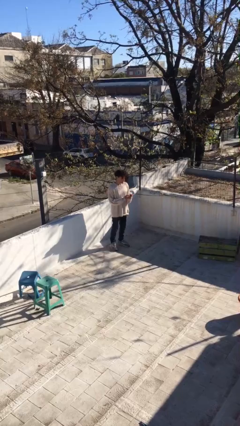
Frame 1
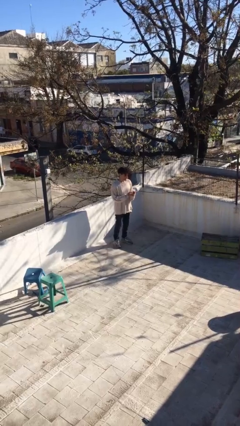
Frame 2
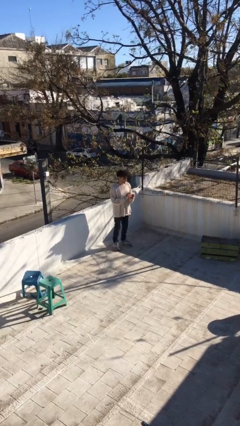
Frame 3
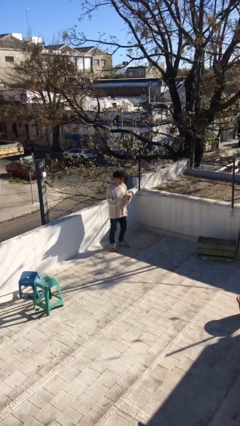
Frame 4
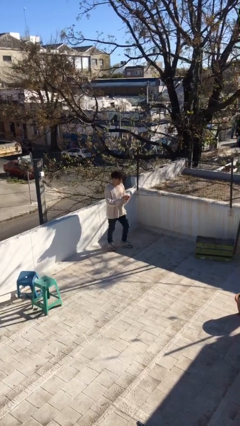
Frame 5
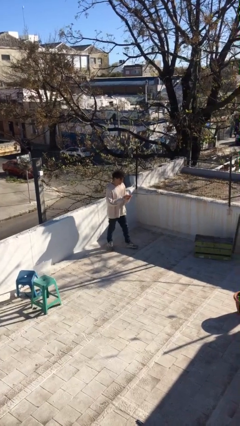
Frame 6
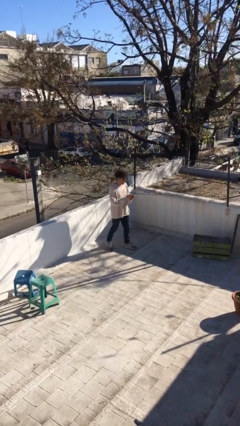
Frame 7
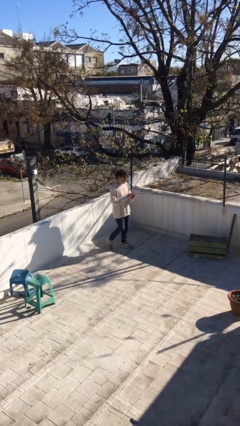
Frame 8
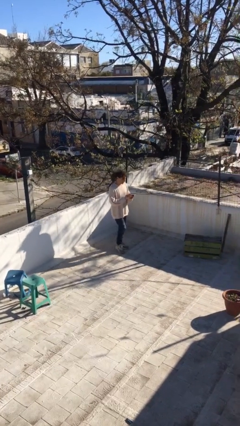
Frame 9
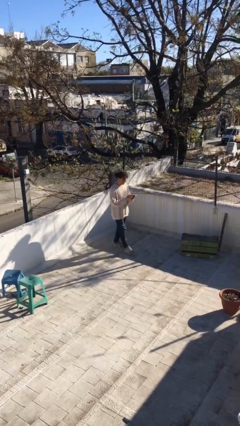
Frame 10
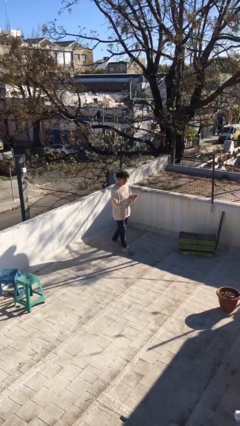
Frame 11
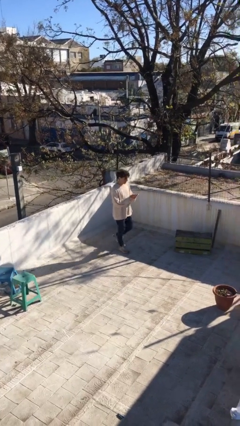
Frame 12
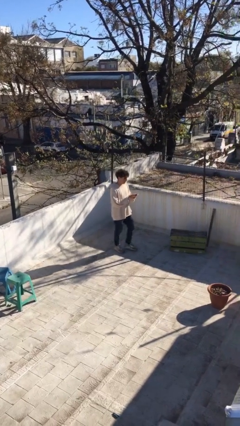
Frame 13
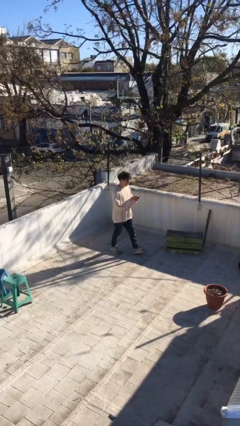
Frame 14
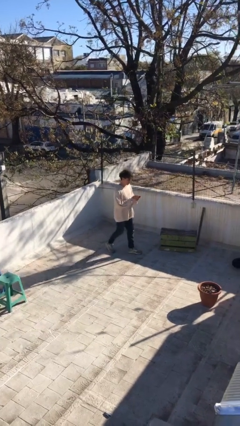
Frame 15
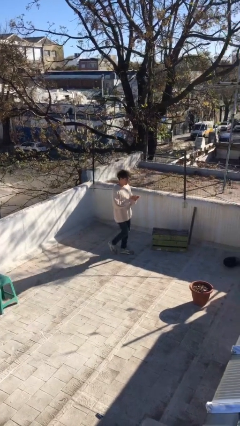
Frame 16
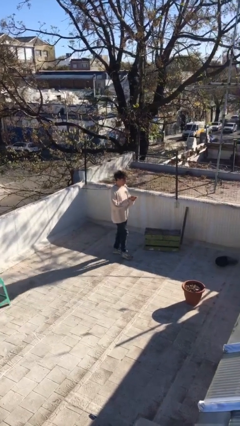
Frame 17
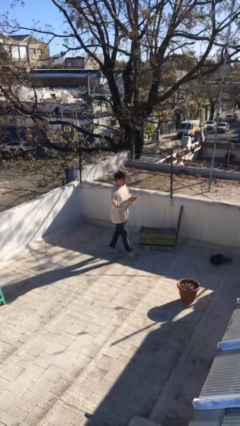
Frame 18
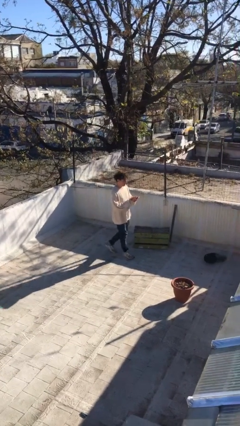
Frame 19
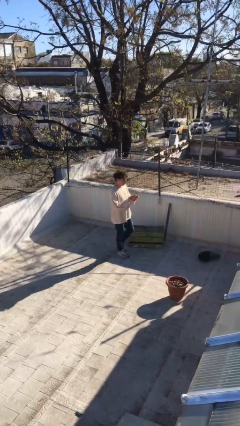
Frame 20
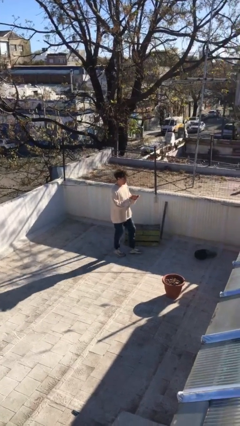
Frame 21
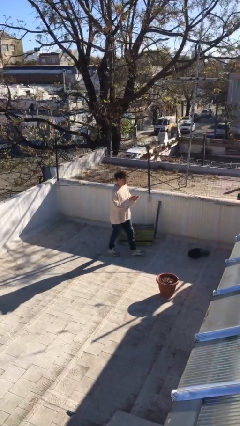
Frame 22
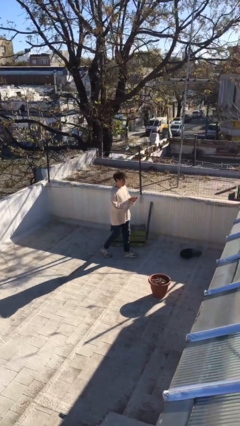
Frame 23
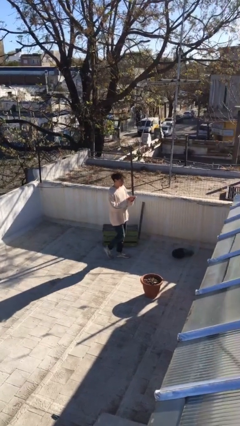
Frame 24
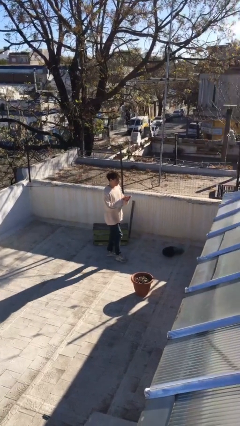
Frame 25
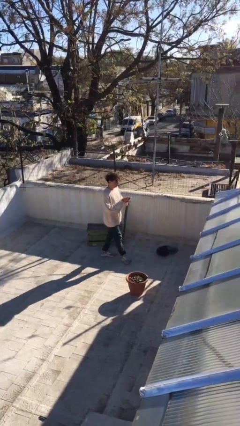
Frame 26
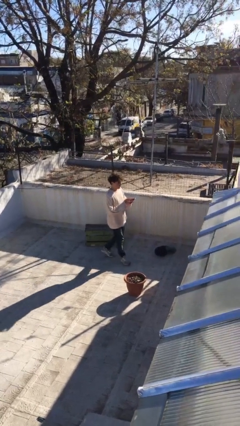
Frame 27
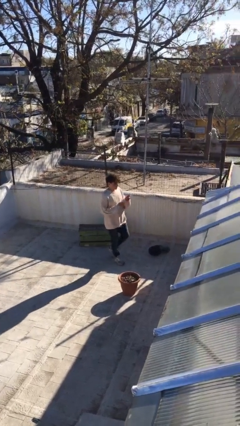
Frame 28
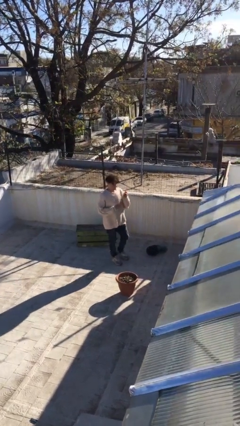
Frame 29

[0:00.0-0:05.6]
person texts on phone

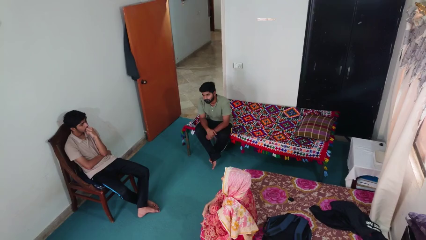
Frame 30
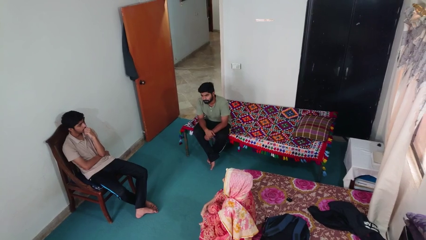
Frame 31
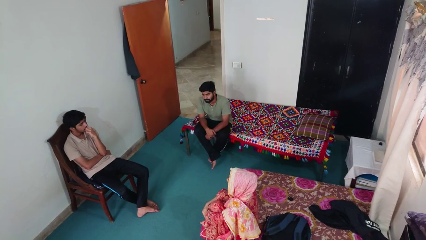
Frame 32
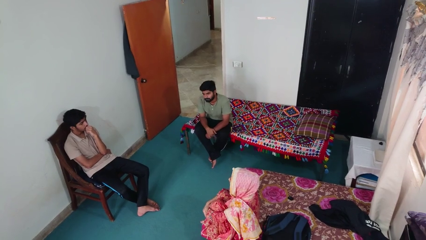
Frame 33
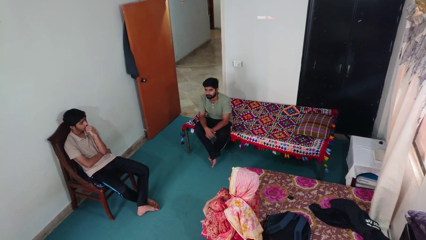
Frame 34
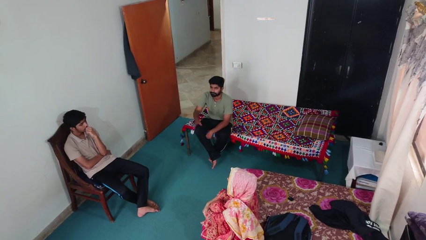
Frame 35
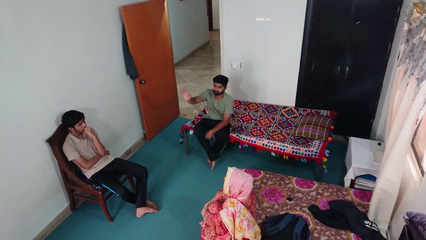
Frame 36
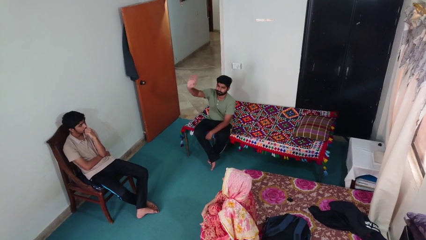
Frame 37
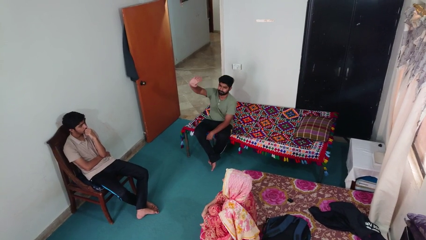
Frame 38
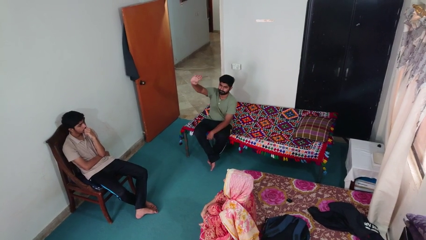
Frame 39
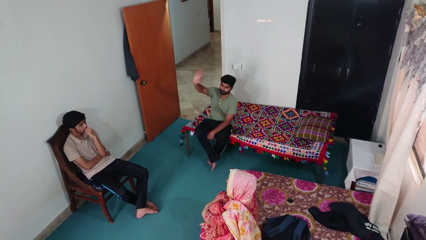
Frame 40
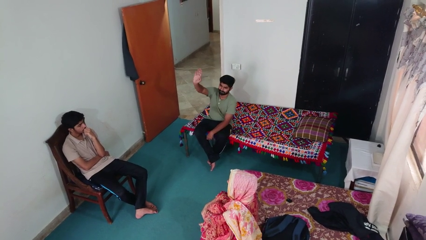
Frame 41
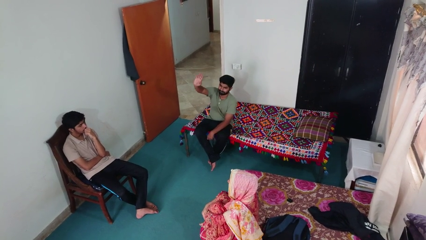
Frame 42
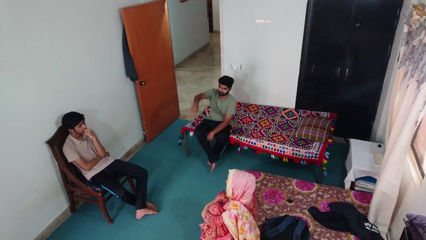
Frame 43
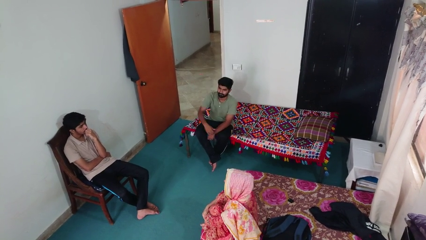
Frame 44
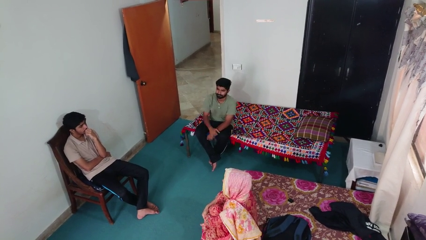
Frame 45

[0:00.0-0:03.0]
person waves at person

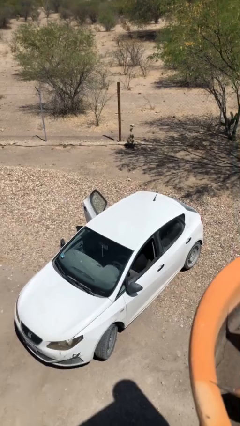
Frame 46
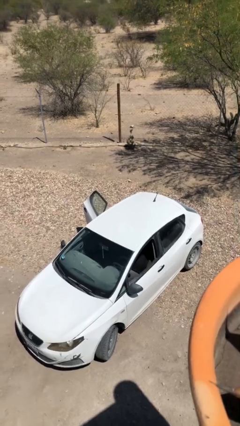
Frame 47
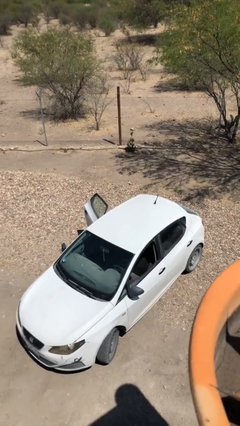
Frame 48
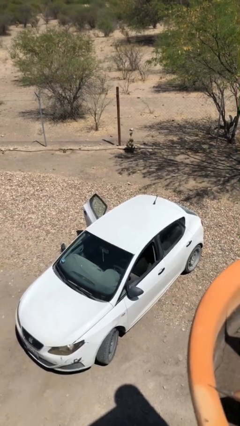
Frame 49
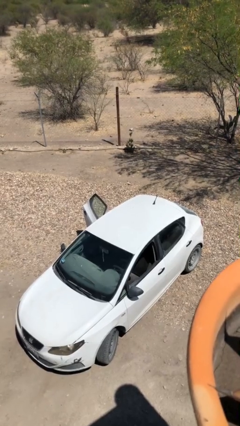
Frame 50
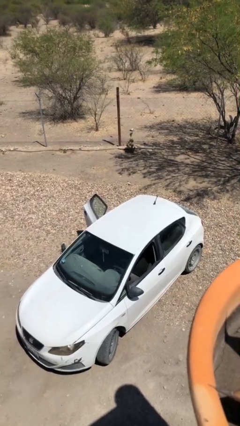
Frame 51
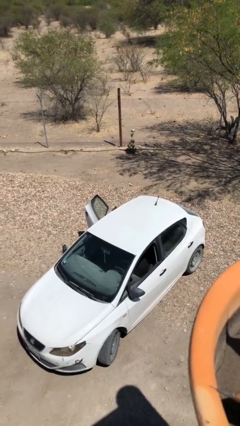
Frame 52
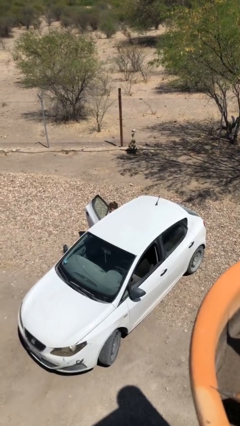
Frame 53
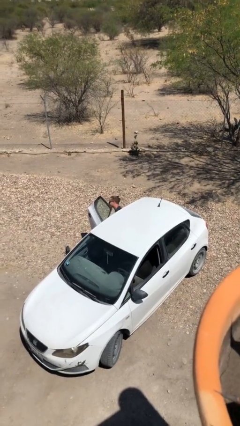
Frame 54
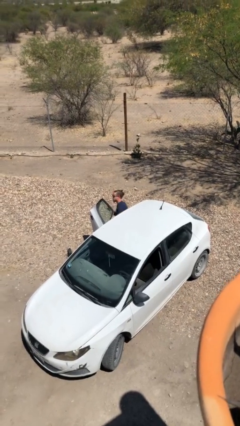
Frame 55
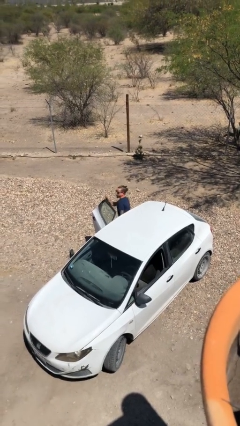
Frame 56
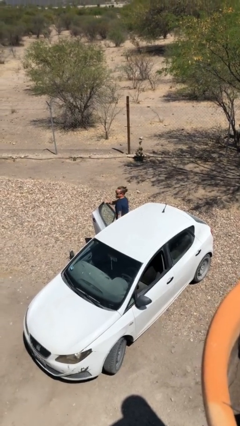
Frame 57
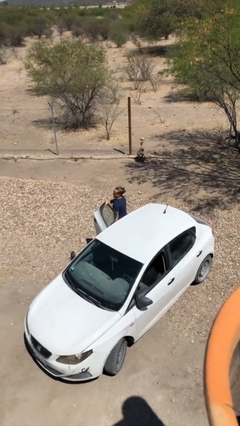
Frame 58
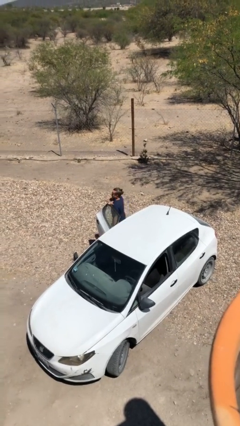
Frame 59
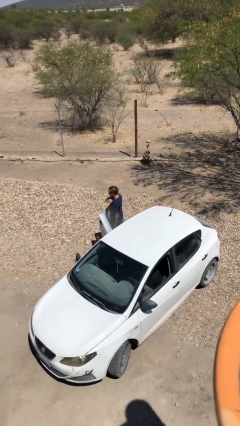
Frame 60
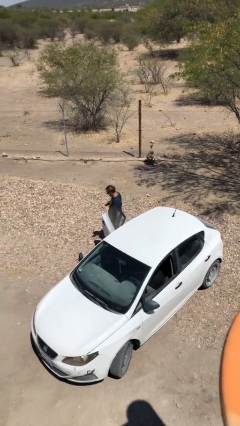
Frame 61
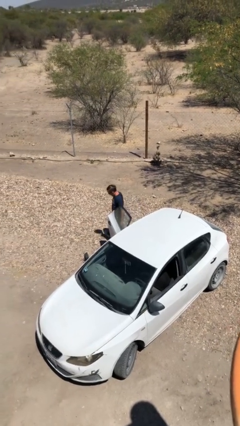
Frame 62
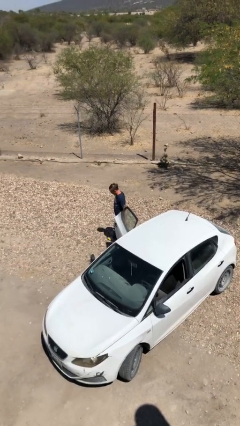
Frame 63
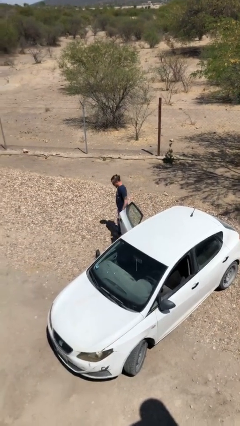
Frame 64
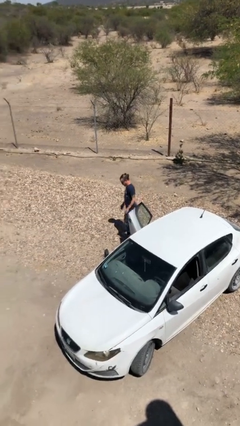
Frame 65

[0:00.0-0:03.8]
person exits car

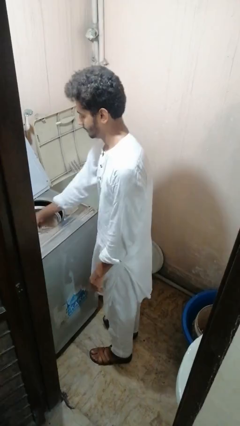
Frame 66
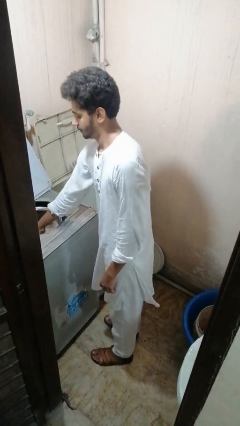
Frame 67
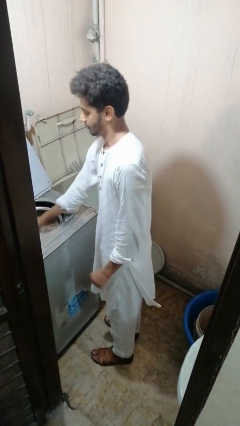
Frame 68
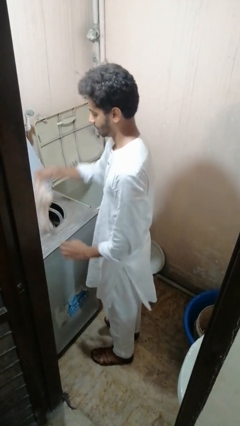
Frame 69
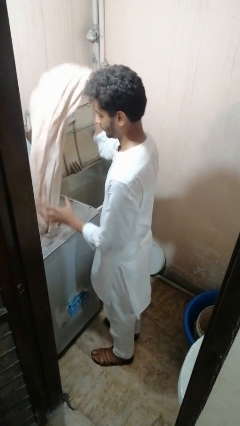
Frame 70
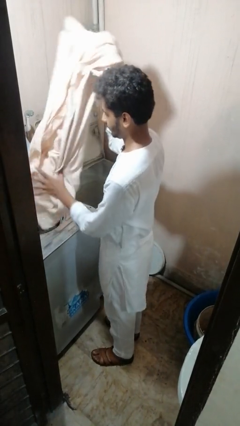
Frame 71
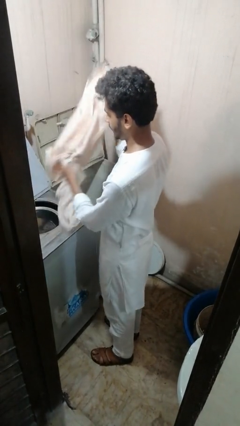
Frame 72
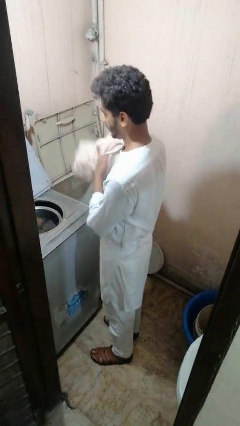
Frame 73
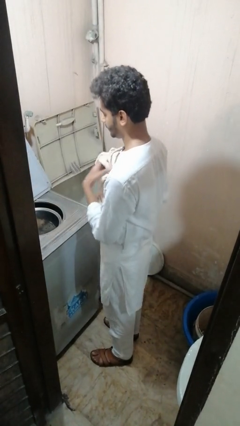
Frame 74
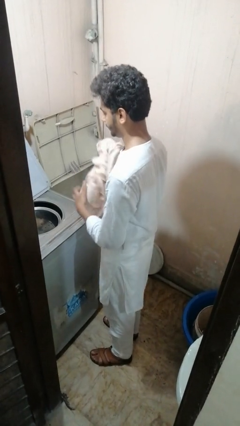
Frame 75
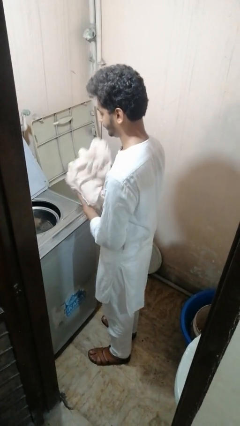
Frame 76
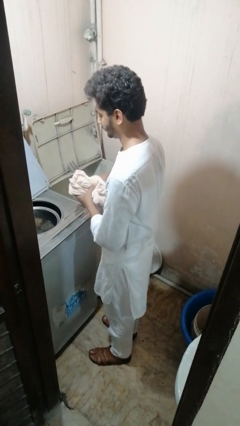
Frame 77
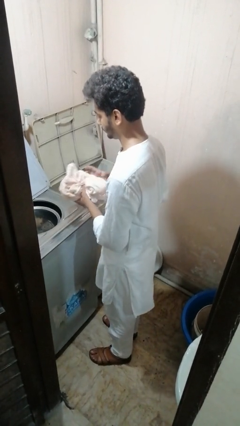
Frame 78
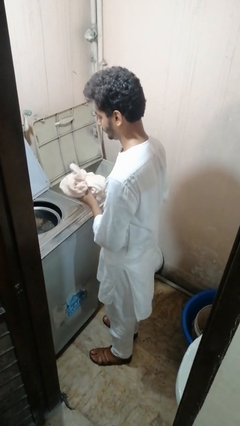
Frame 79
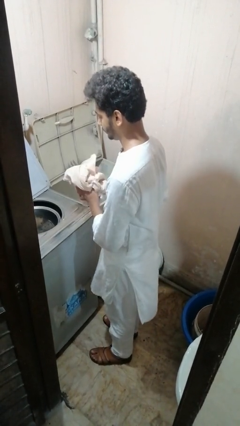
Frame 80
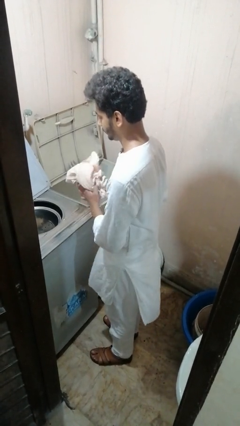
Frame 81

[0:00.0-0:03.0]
person unloads dryer

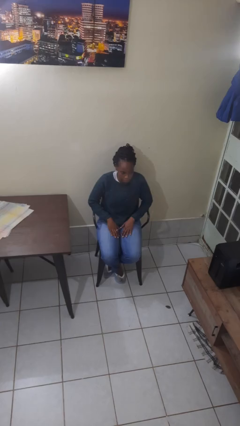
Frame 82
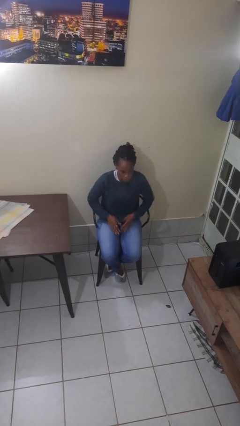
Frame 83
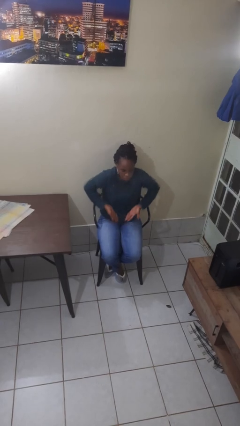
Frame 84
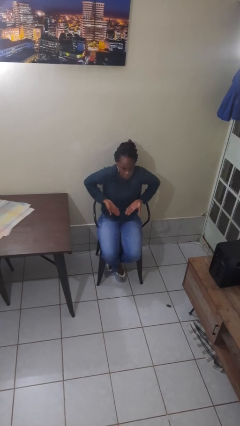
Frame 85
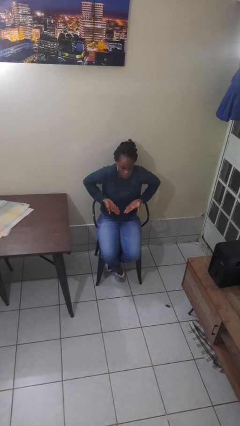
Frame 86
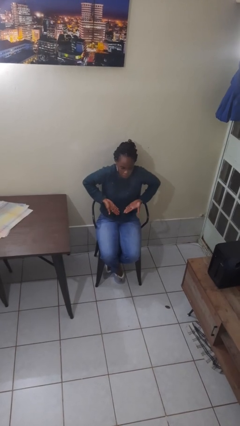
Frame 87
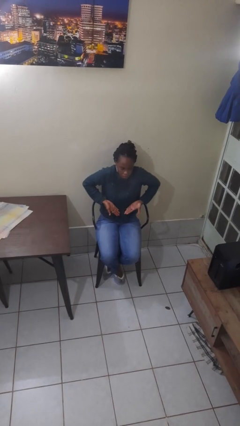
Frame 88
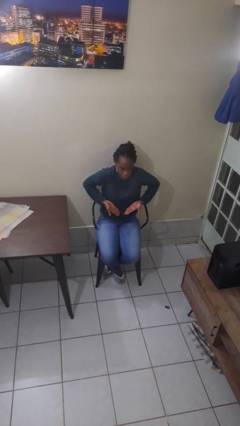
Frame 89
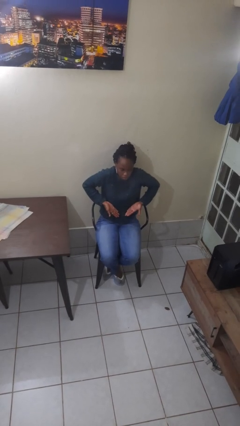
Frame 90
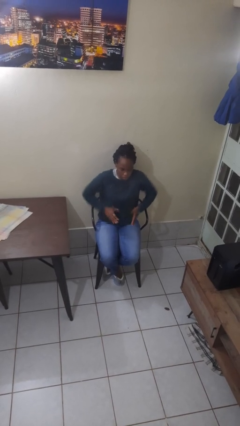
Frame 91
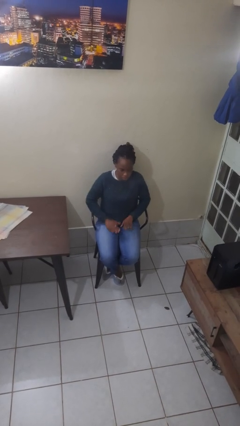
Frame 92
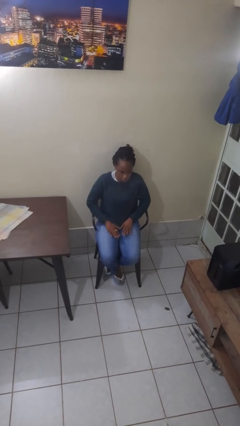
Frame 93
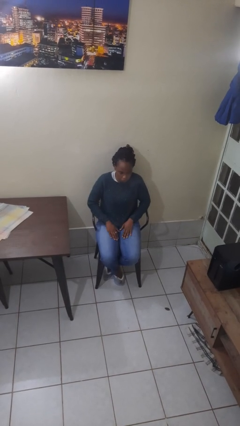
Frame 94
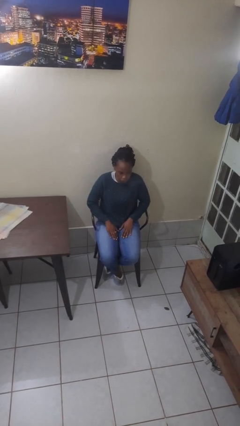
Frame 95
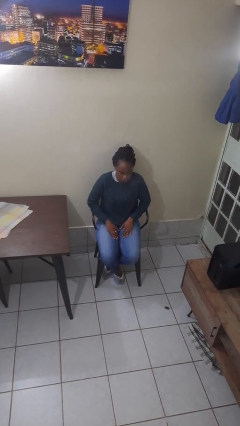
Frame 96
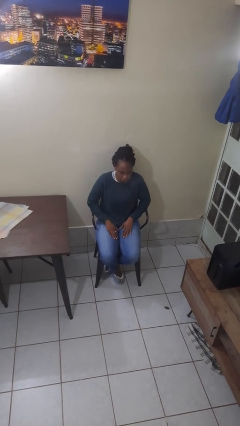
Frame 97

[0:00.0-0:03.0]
person shrugs
